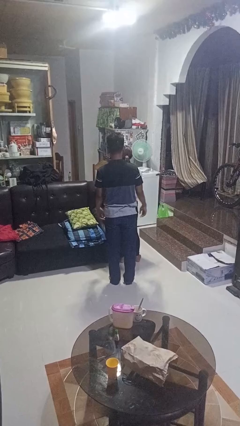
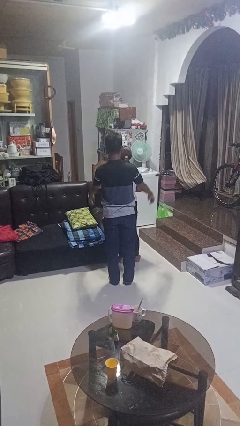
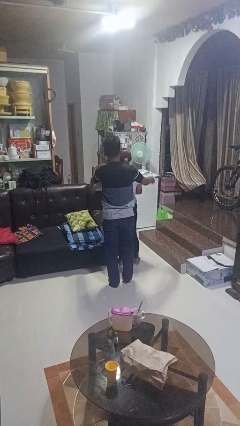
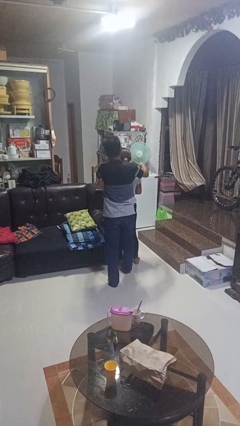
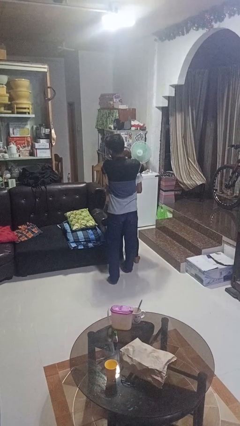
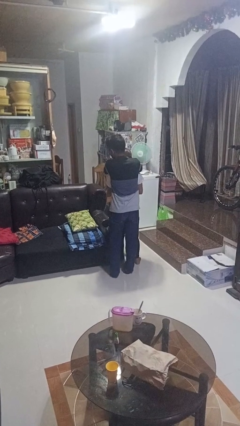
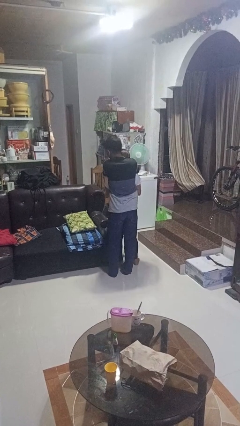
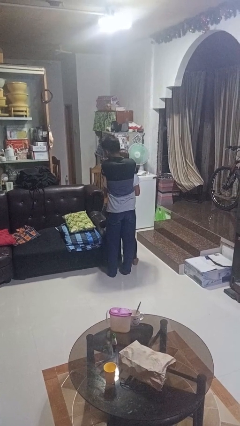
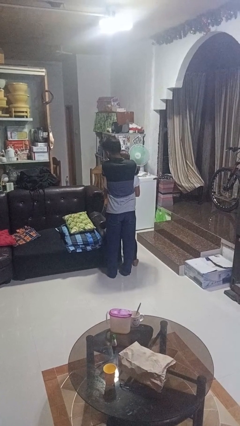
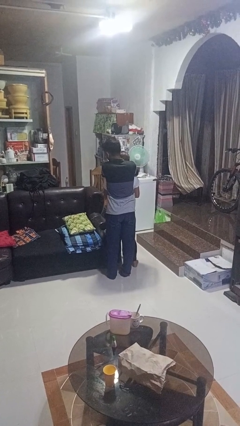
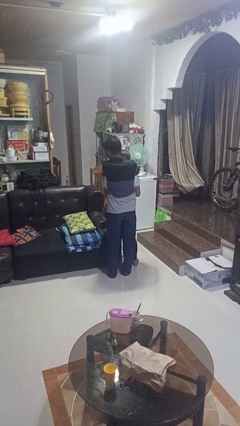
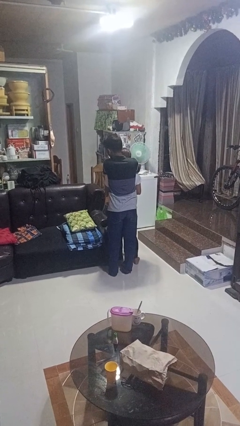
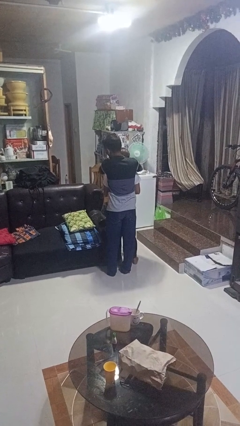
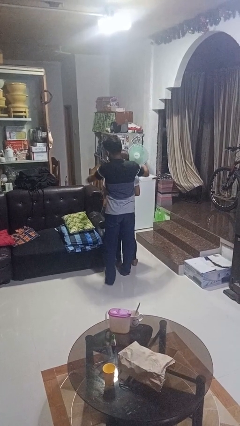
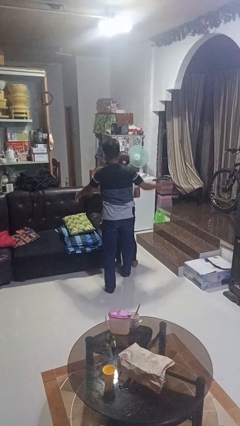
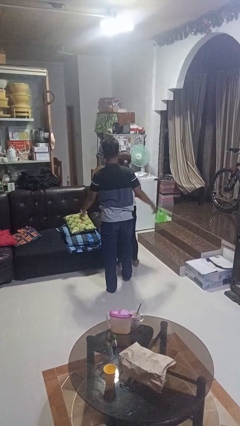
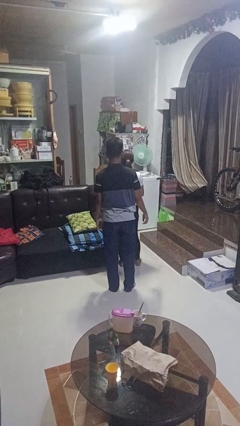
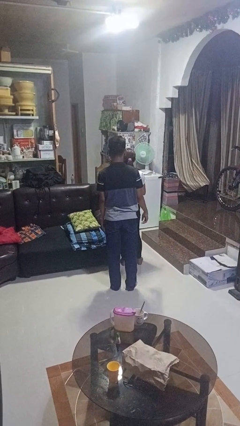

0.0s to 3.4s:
person hugs person from behind

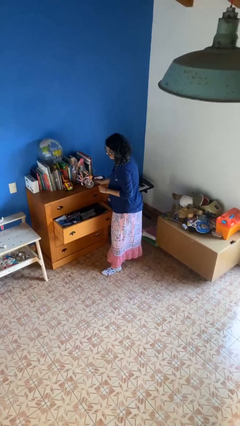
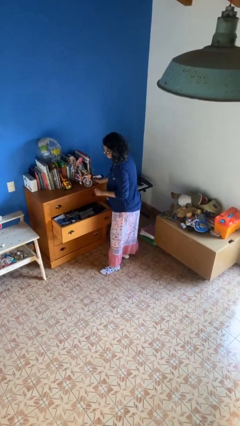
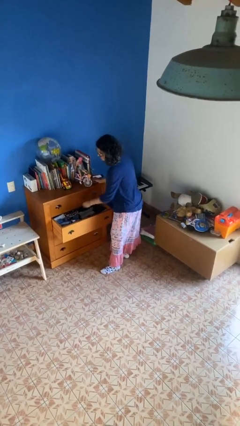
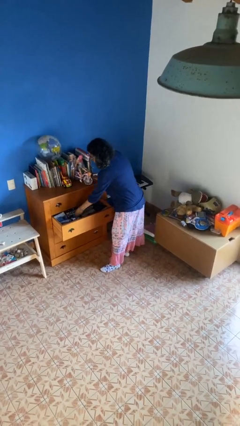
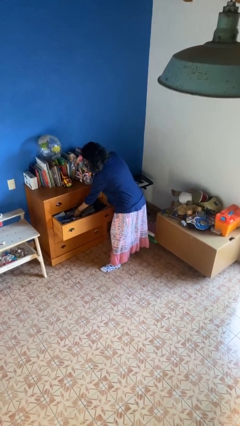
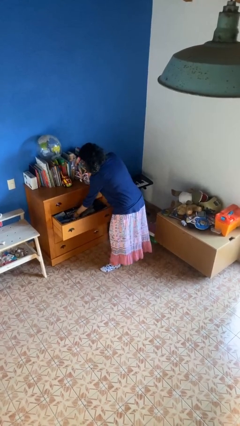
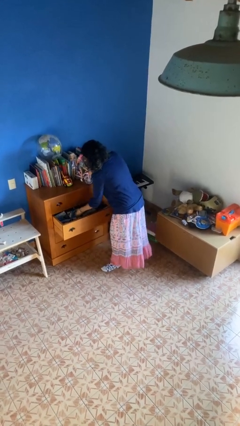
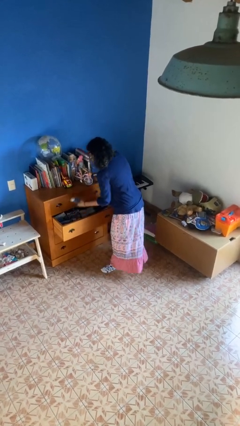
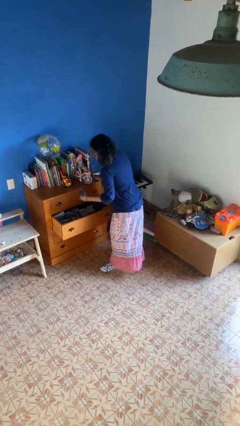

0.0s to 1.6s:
person takes clothes from dresser

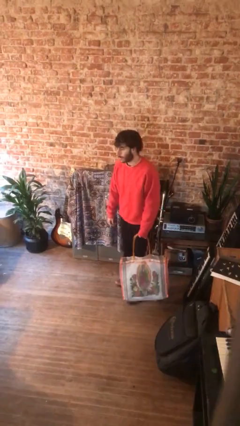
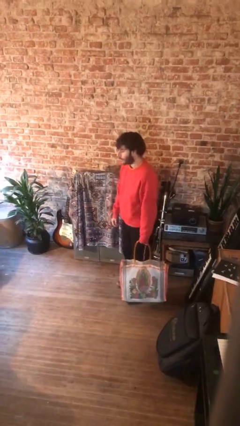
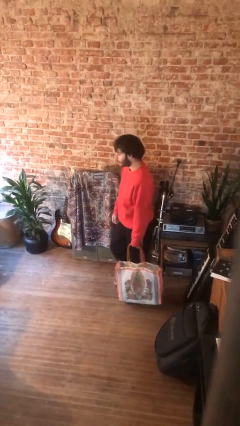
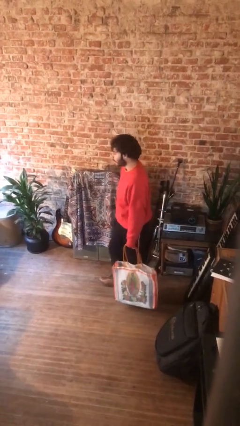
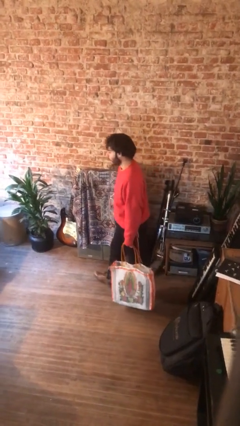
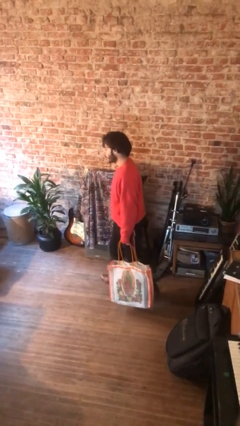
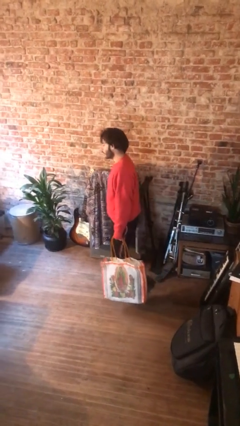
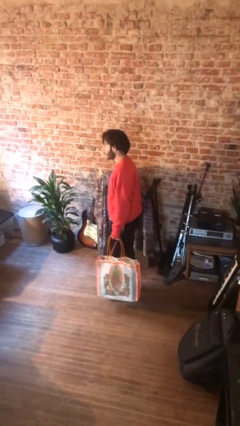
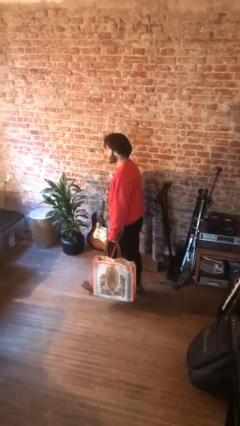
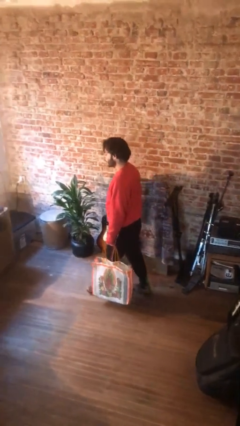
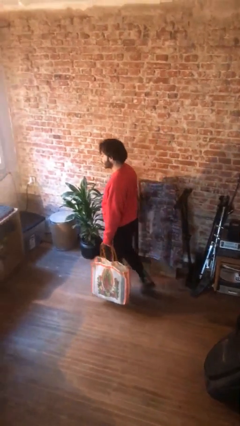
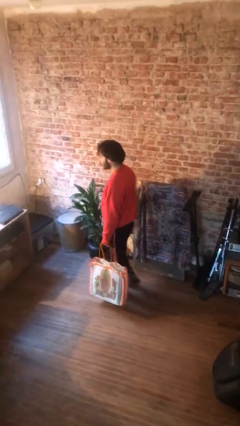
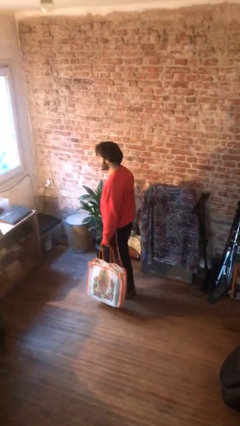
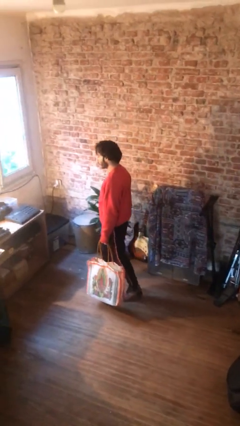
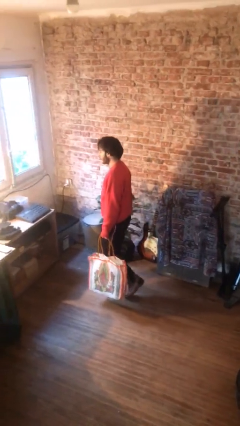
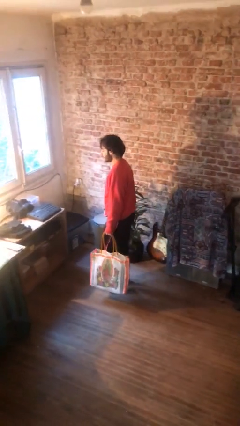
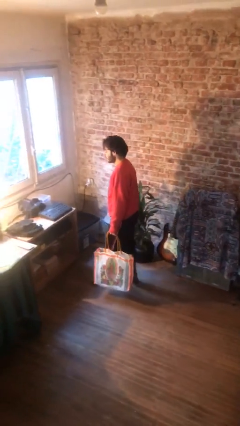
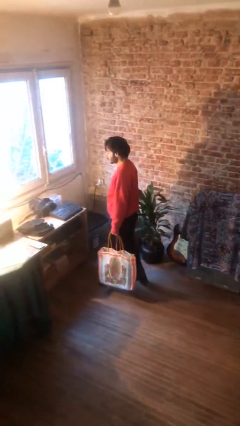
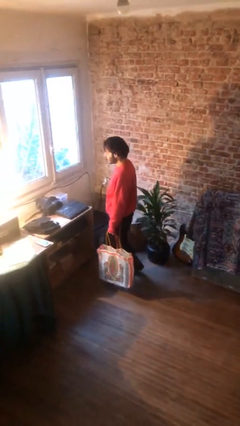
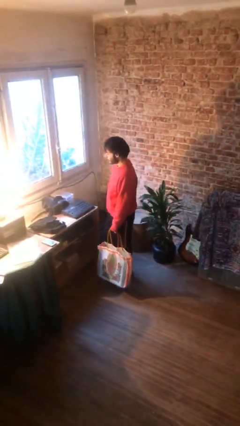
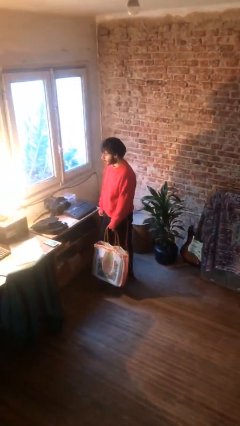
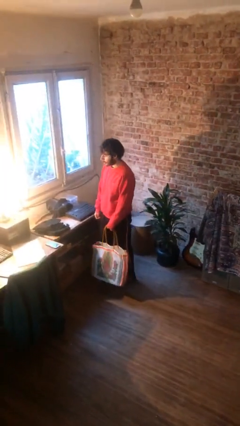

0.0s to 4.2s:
person carries groceries

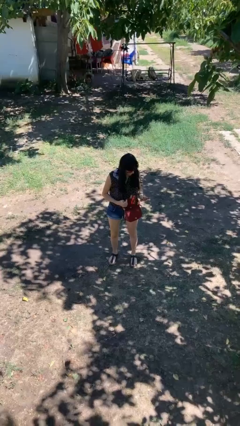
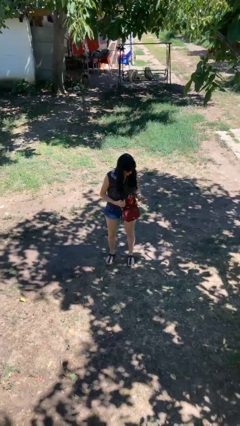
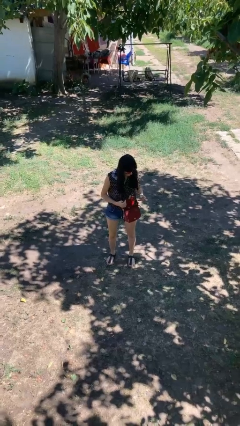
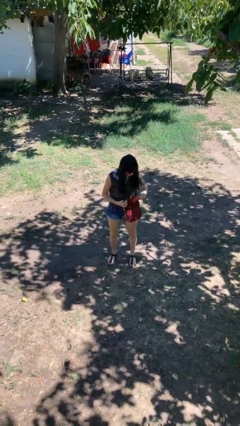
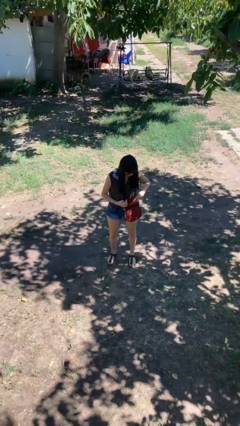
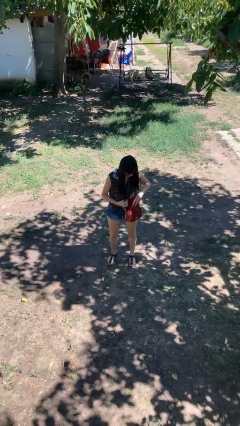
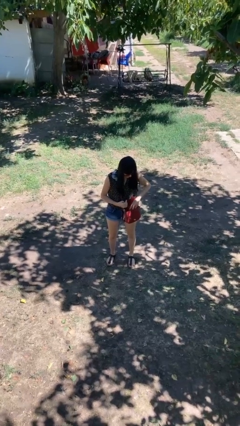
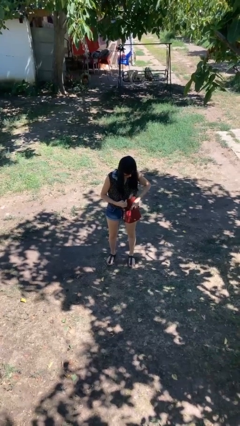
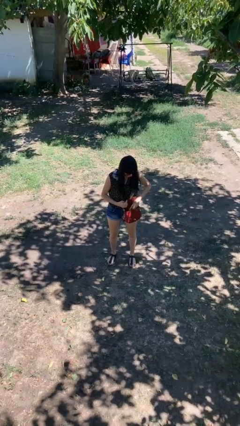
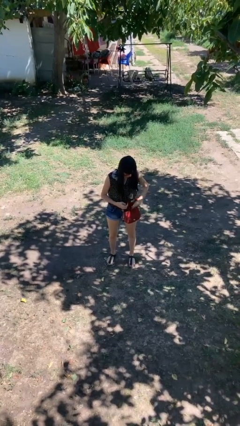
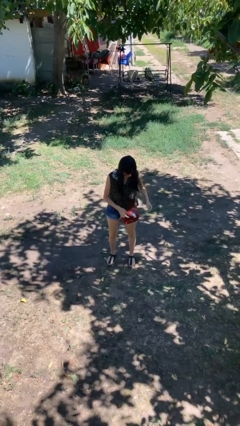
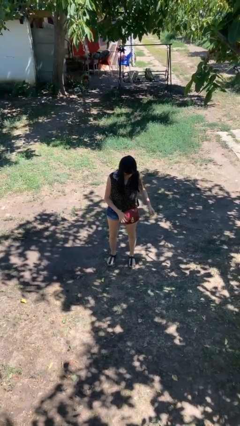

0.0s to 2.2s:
person puts object into purse

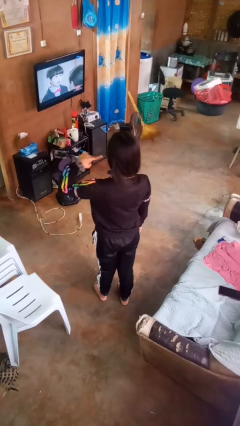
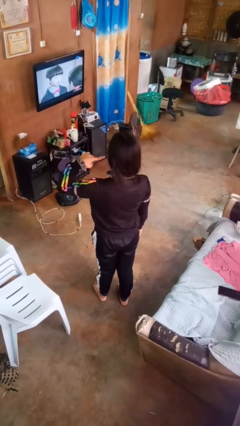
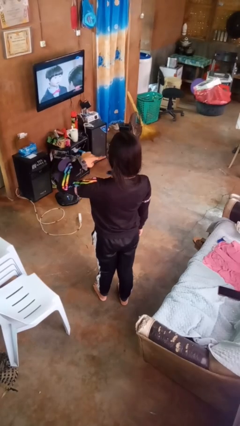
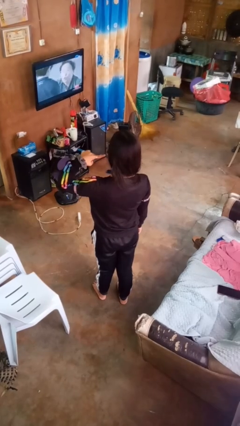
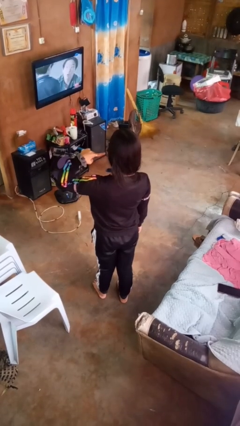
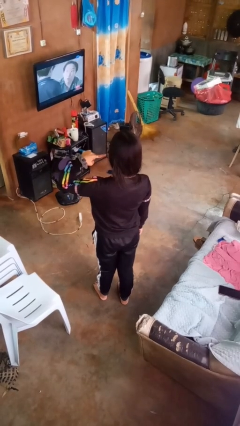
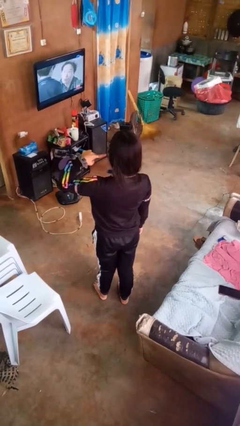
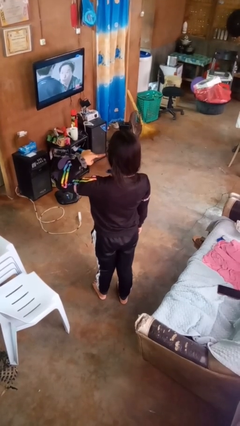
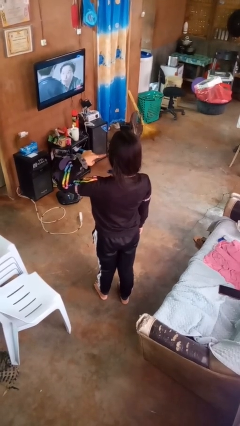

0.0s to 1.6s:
person gestures listen closely

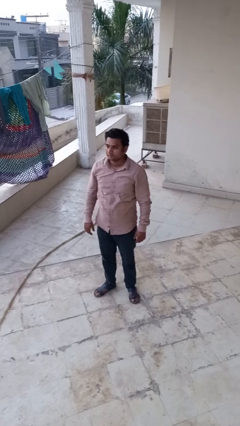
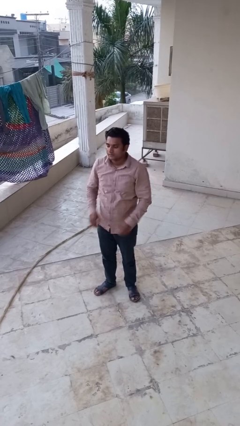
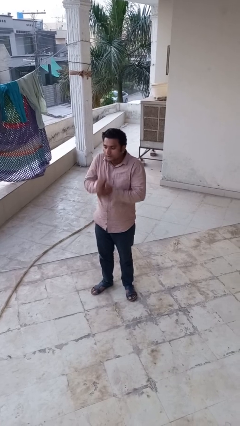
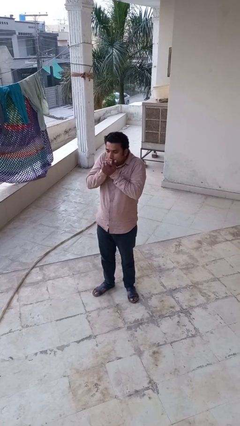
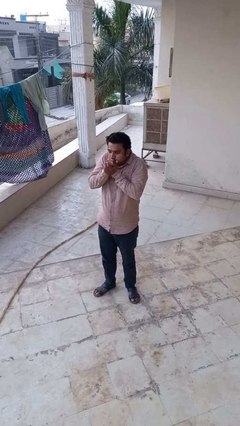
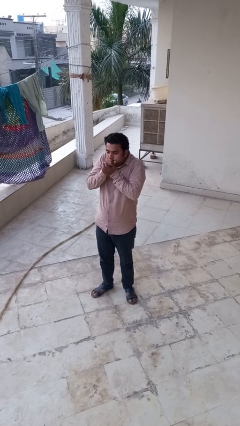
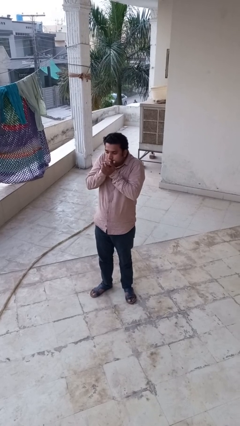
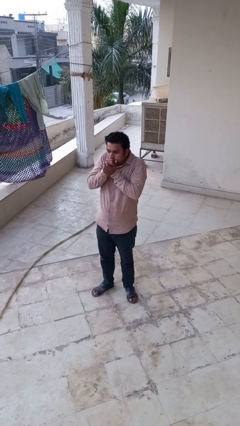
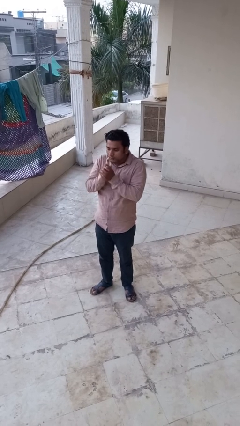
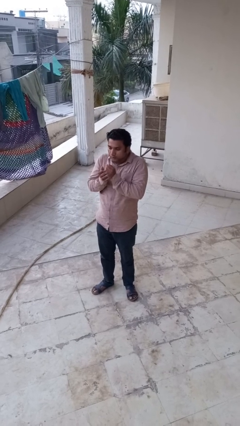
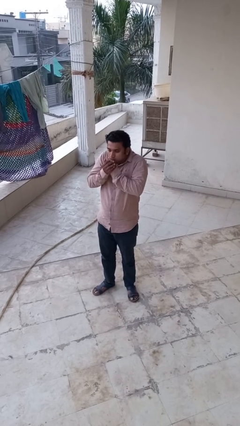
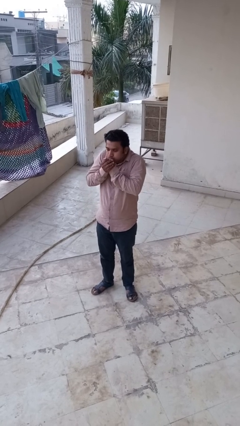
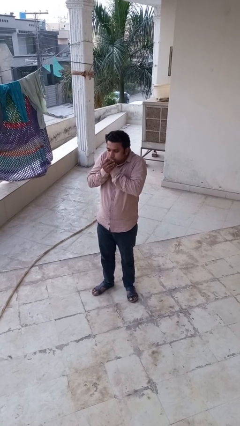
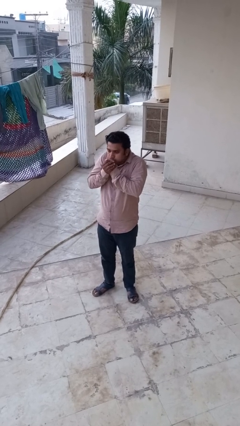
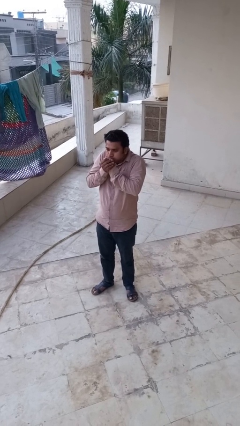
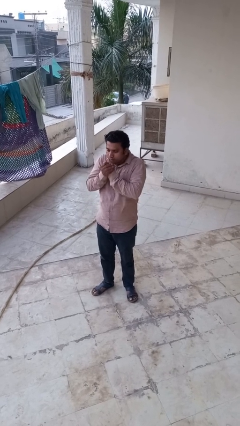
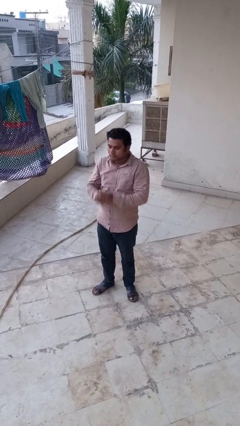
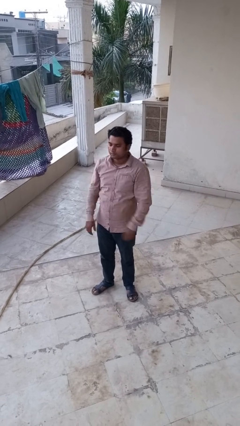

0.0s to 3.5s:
person blows into hands

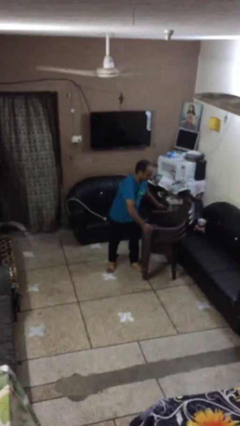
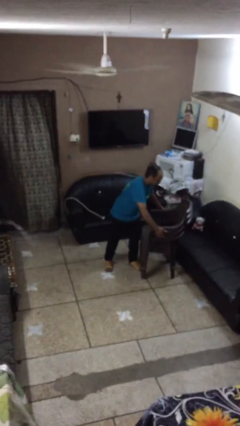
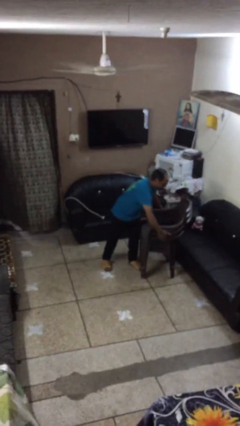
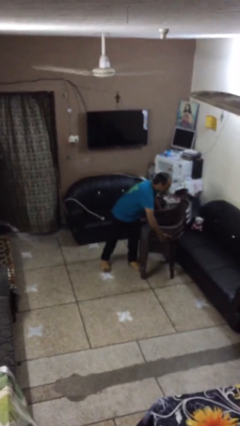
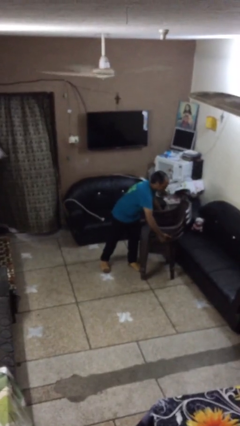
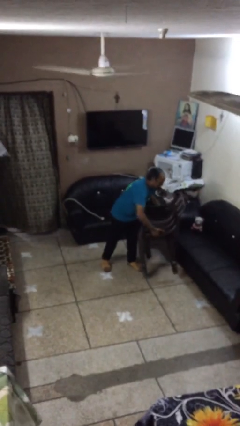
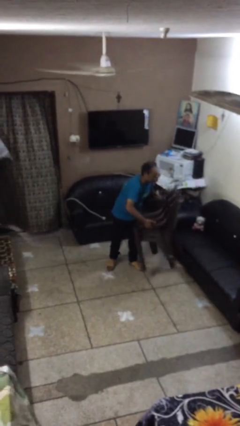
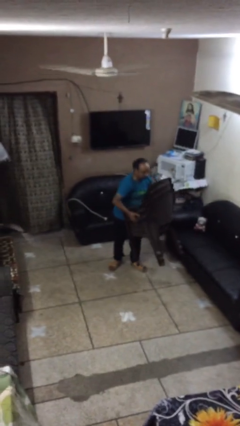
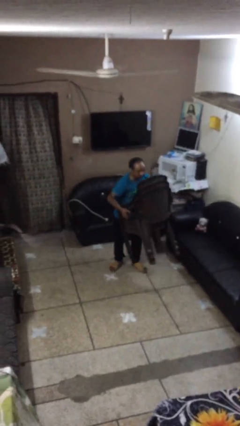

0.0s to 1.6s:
person picks up object from floor
